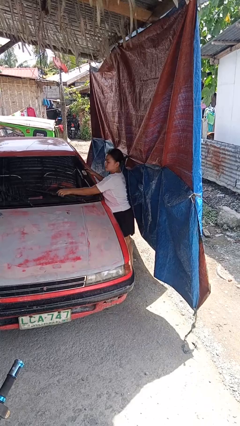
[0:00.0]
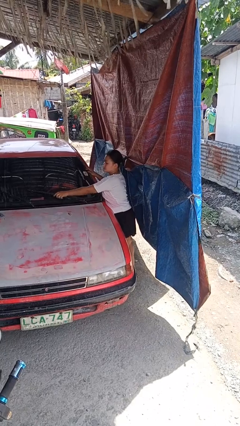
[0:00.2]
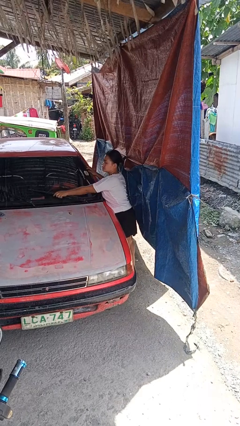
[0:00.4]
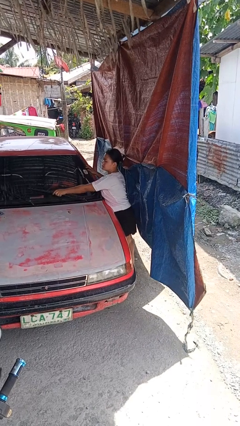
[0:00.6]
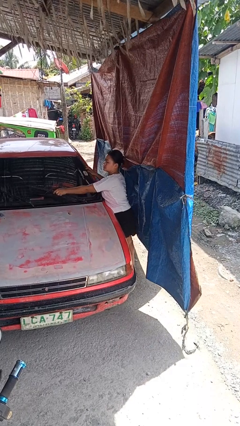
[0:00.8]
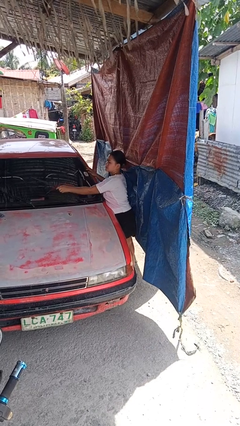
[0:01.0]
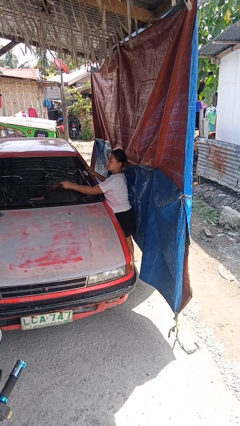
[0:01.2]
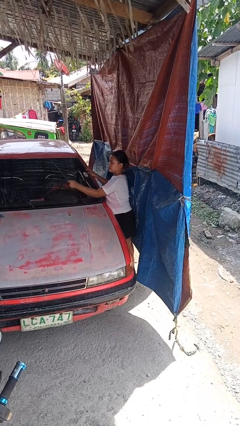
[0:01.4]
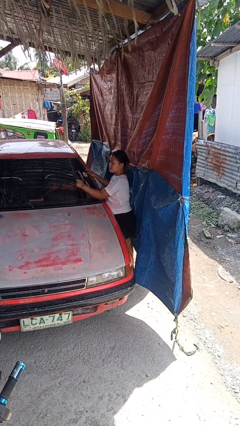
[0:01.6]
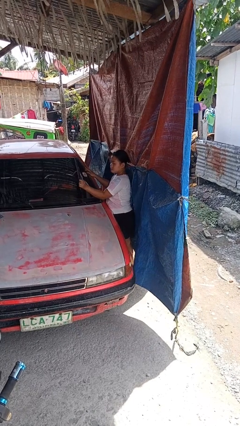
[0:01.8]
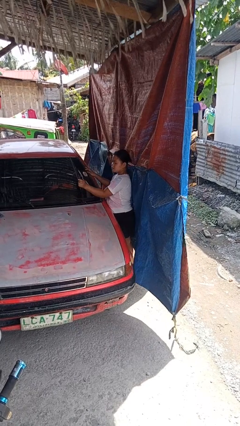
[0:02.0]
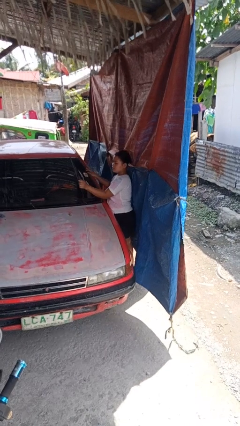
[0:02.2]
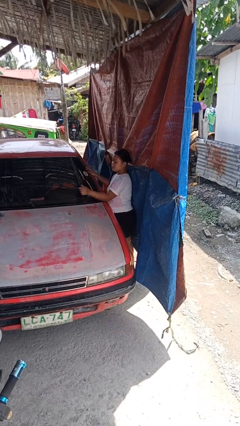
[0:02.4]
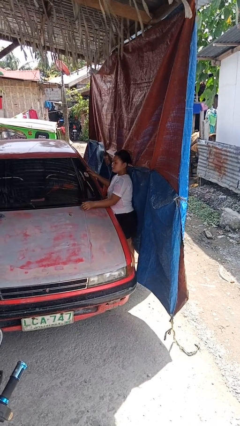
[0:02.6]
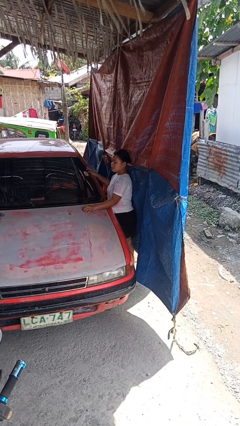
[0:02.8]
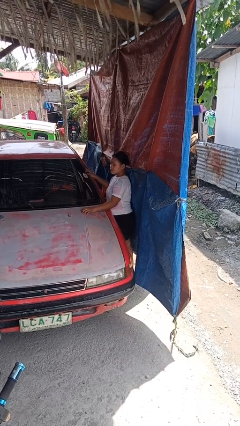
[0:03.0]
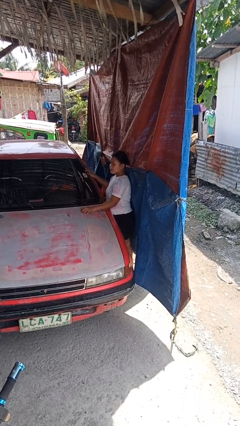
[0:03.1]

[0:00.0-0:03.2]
person flips up car wipers

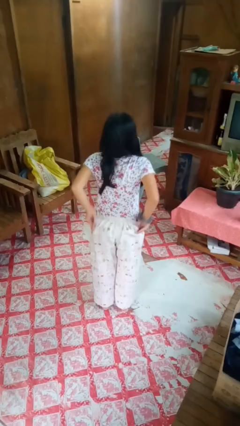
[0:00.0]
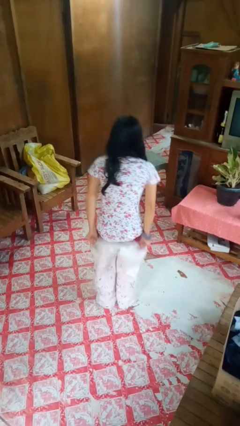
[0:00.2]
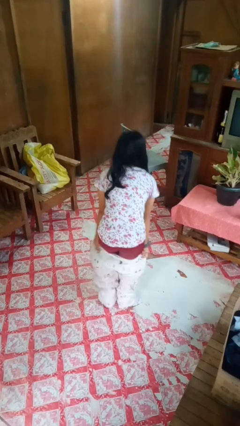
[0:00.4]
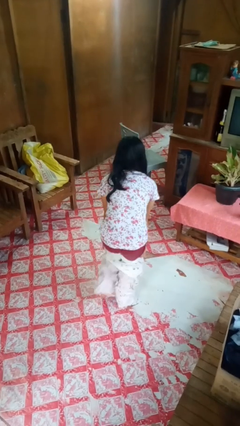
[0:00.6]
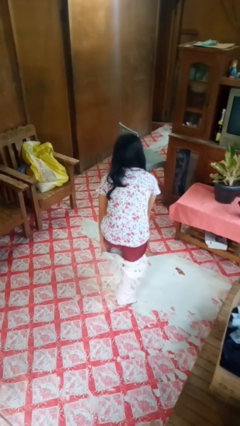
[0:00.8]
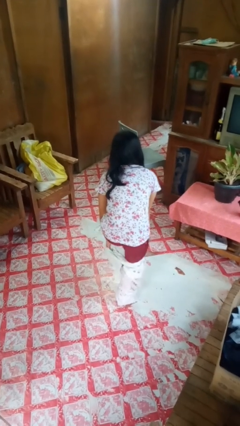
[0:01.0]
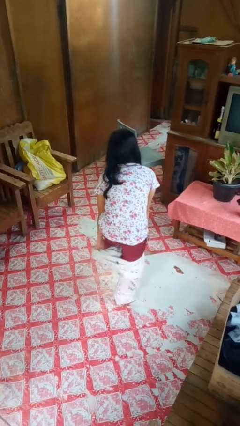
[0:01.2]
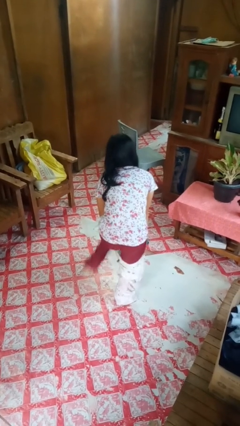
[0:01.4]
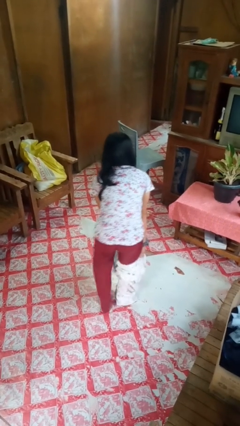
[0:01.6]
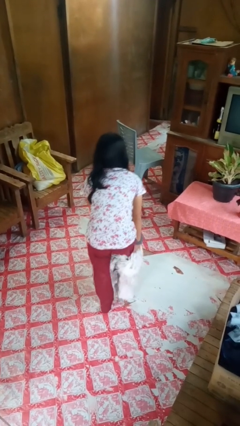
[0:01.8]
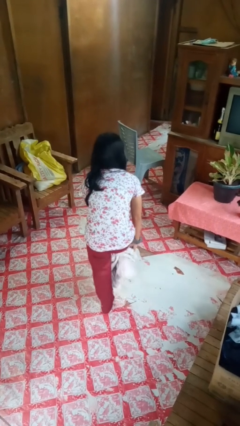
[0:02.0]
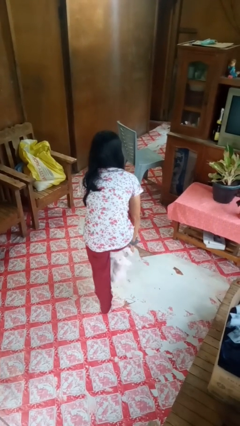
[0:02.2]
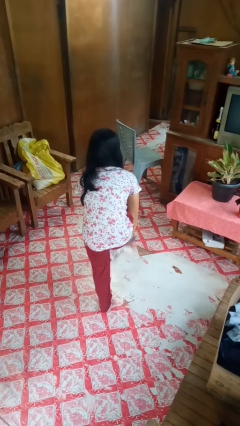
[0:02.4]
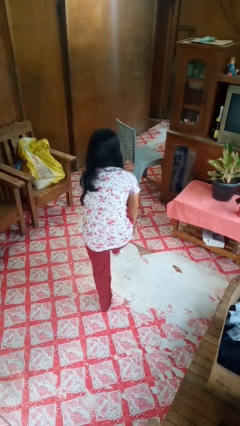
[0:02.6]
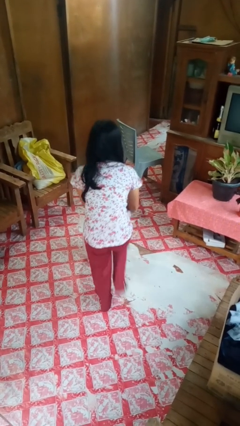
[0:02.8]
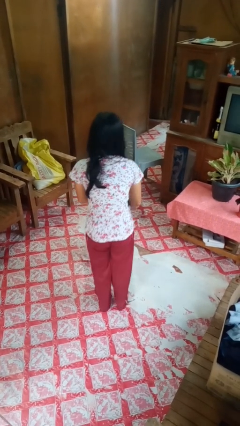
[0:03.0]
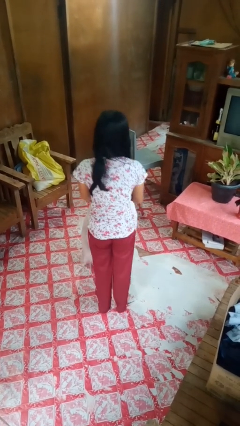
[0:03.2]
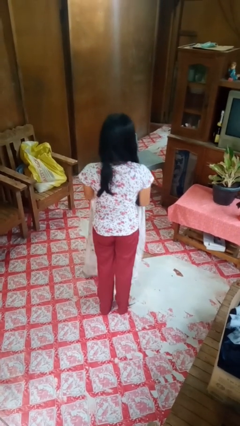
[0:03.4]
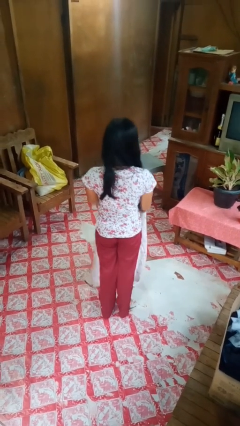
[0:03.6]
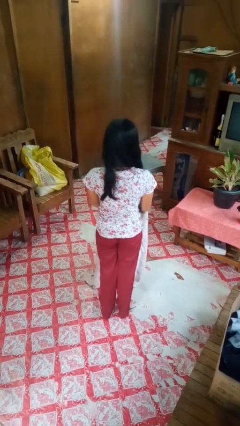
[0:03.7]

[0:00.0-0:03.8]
person takes off pants

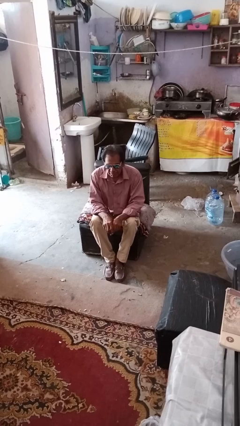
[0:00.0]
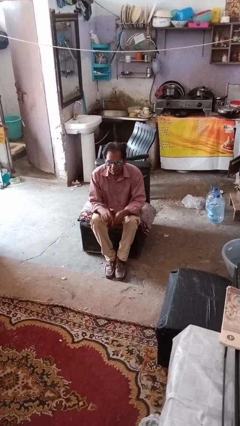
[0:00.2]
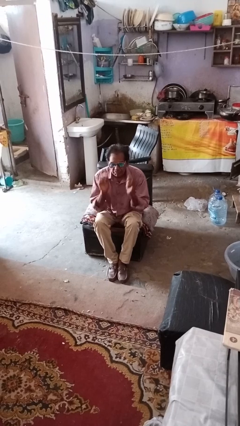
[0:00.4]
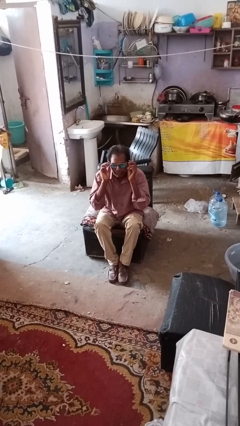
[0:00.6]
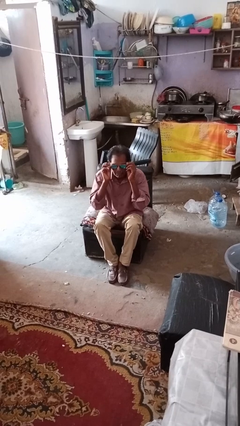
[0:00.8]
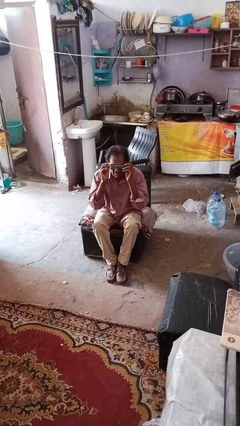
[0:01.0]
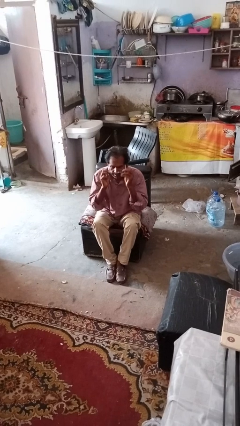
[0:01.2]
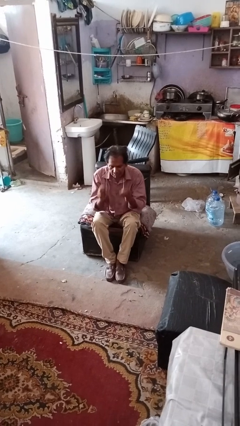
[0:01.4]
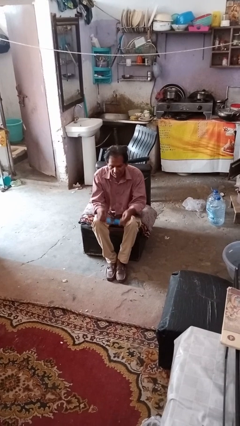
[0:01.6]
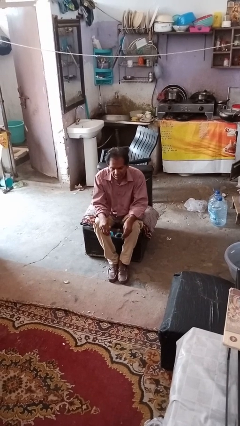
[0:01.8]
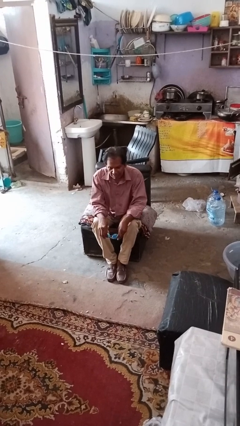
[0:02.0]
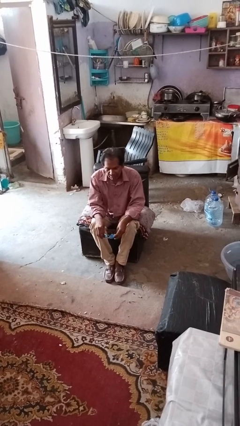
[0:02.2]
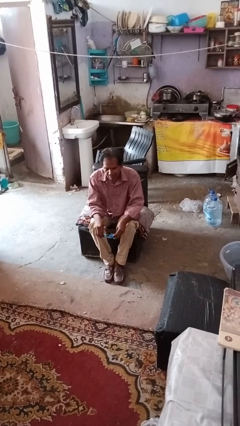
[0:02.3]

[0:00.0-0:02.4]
person takes off sunglasses

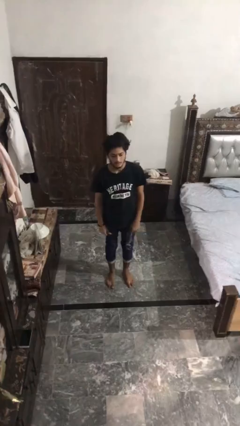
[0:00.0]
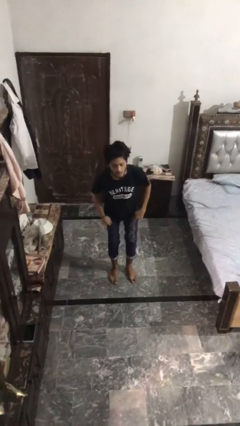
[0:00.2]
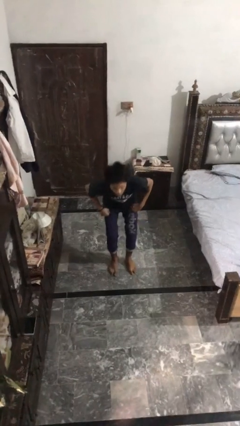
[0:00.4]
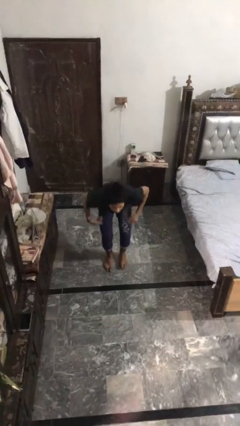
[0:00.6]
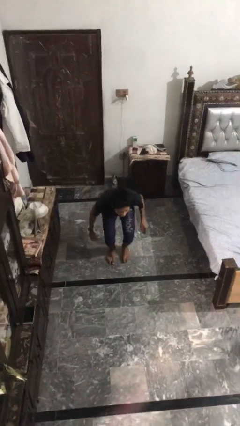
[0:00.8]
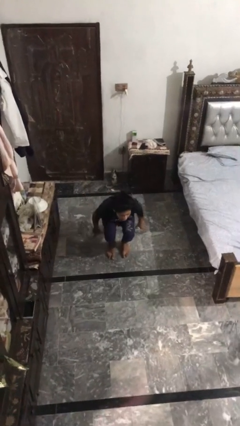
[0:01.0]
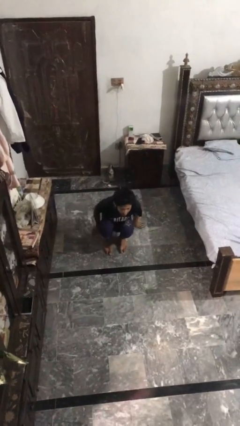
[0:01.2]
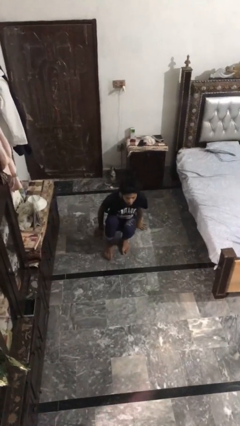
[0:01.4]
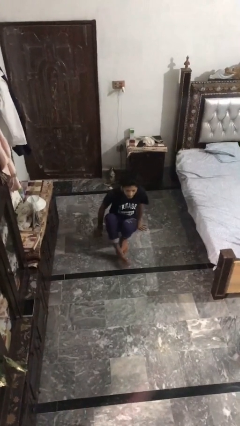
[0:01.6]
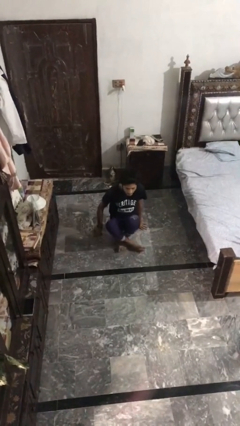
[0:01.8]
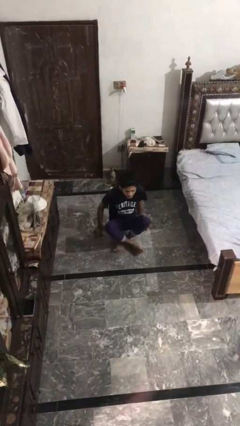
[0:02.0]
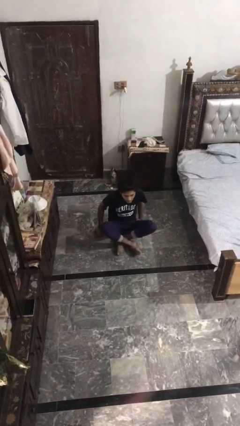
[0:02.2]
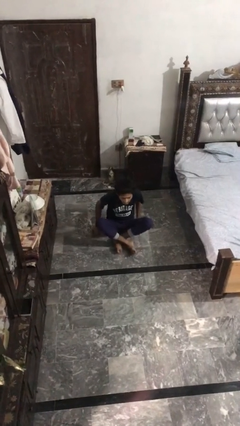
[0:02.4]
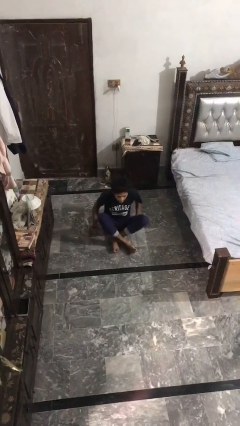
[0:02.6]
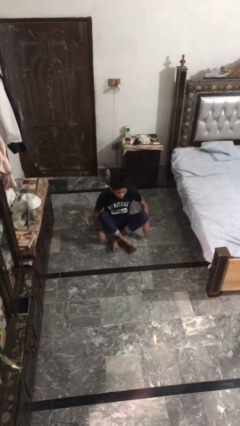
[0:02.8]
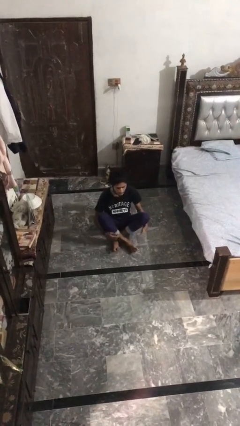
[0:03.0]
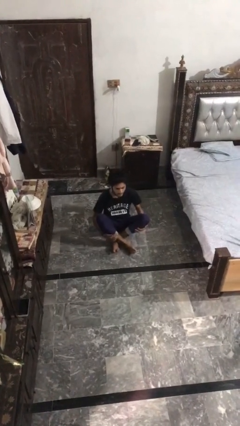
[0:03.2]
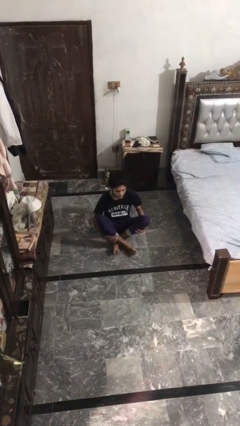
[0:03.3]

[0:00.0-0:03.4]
person sits crisscross

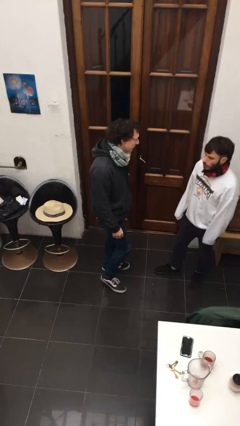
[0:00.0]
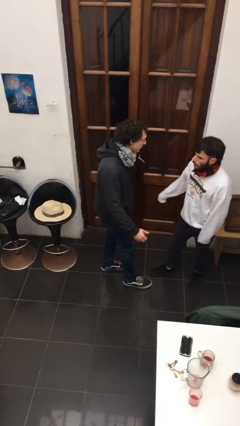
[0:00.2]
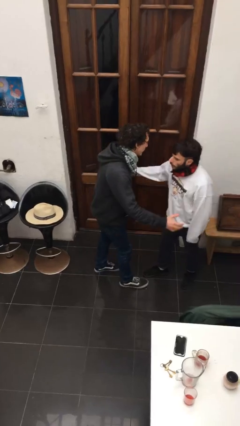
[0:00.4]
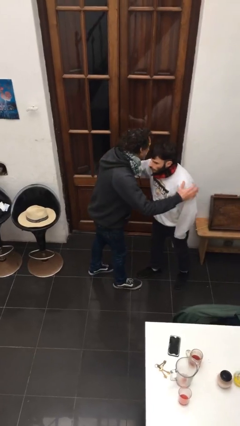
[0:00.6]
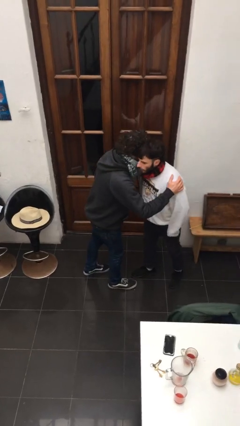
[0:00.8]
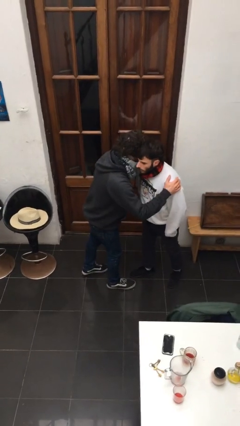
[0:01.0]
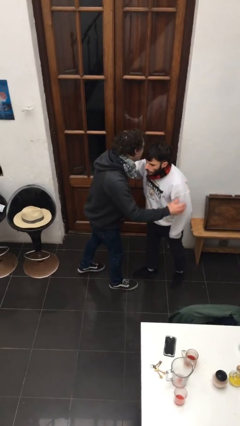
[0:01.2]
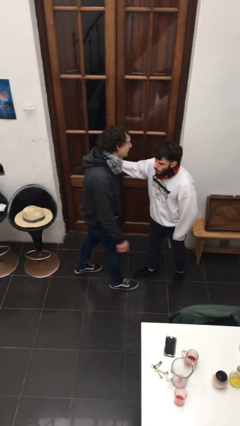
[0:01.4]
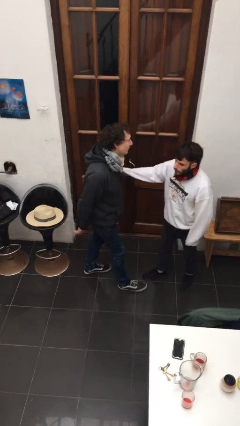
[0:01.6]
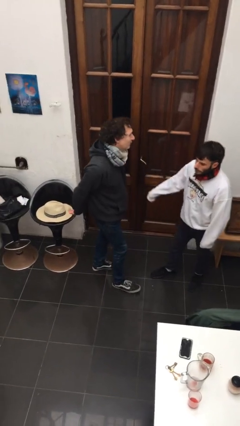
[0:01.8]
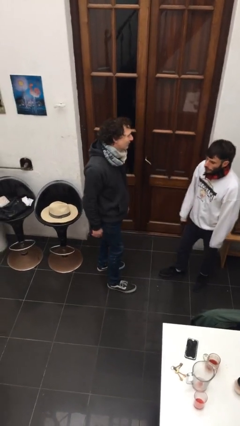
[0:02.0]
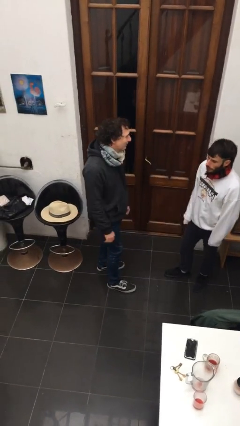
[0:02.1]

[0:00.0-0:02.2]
person kisses cheek of person

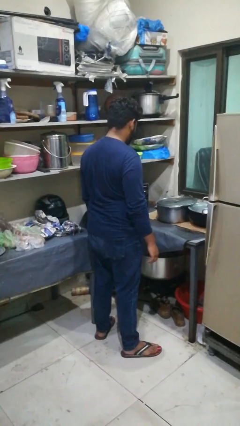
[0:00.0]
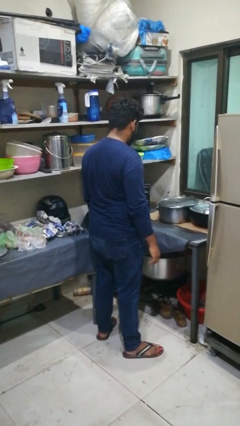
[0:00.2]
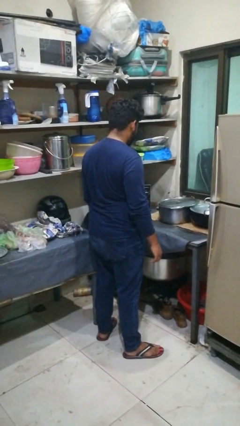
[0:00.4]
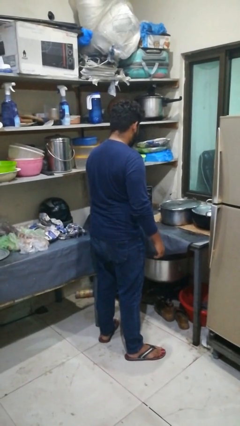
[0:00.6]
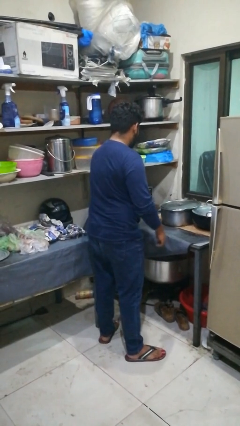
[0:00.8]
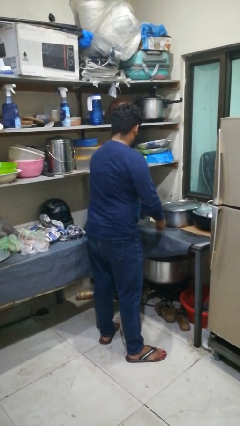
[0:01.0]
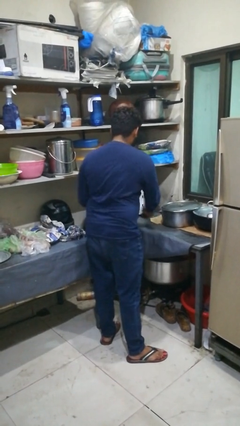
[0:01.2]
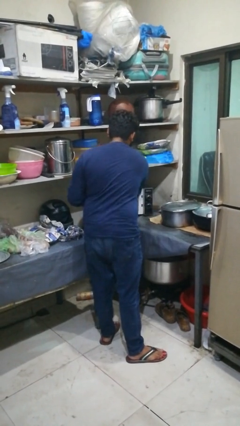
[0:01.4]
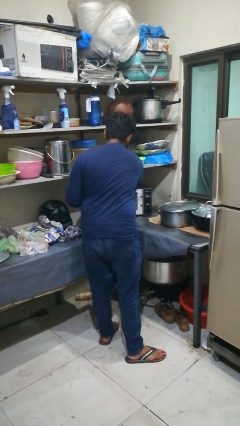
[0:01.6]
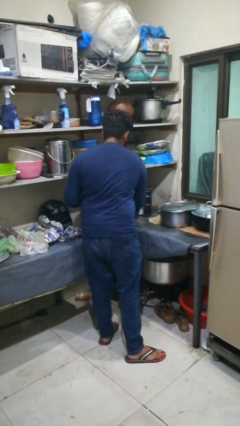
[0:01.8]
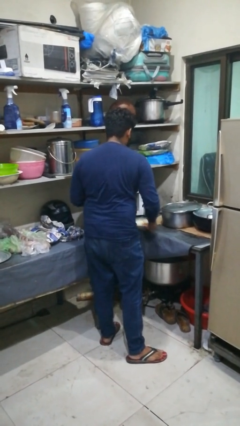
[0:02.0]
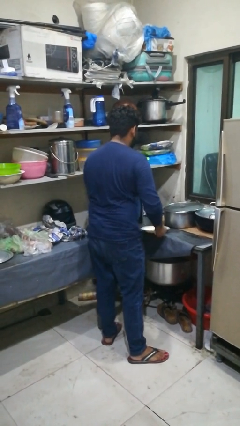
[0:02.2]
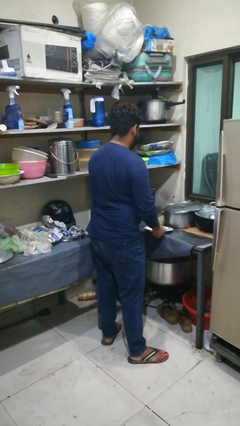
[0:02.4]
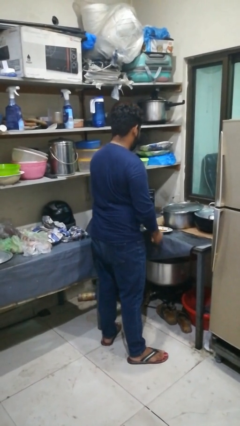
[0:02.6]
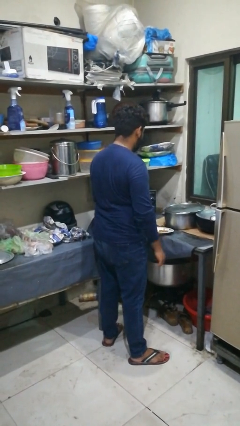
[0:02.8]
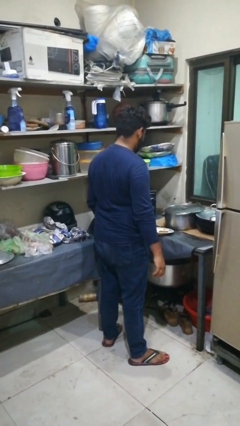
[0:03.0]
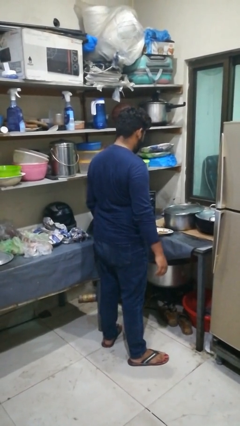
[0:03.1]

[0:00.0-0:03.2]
person takes object from oven
